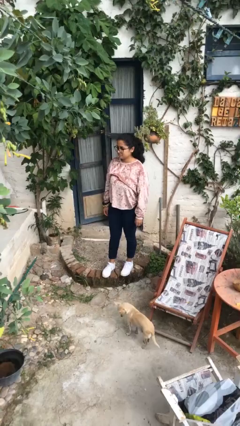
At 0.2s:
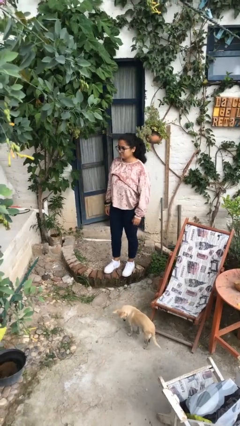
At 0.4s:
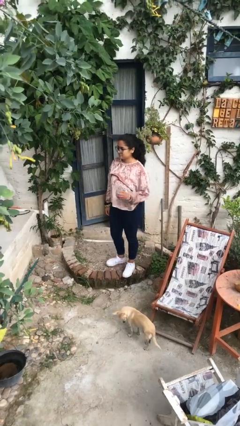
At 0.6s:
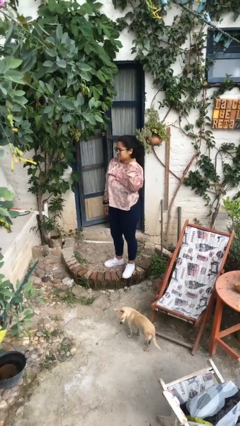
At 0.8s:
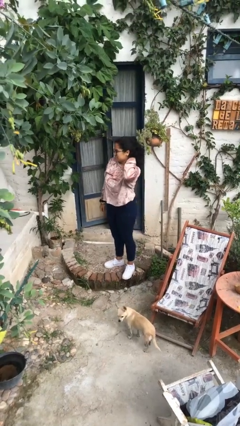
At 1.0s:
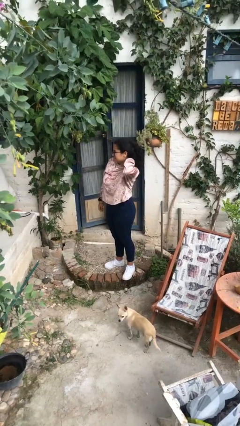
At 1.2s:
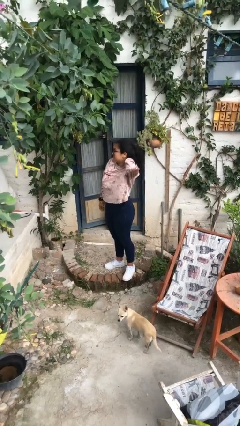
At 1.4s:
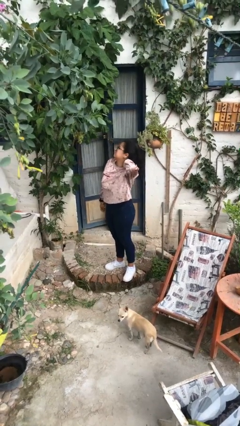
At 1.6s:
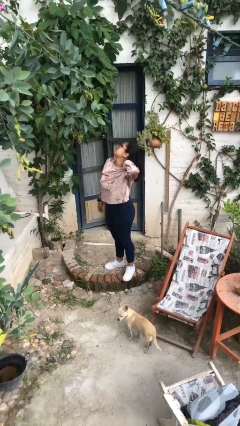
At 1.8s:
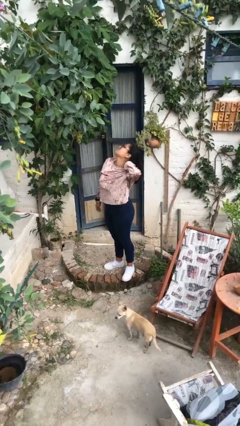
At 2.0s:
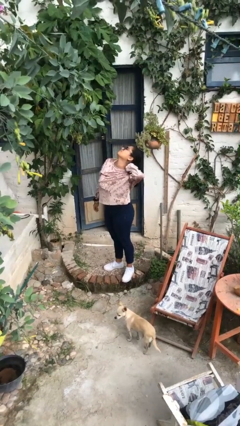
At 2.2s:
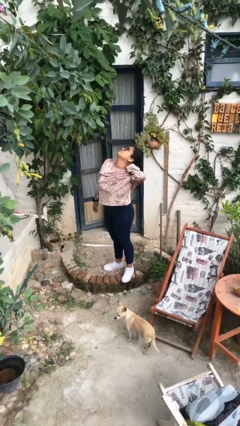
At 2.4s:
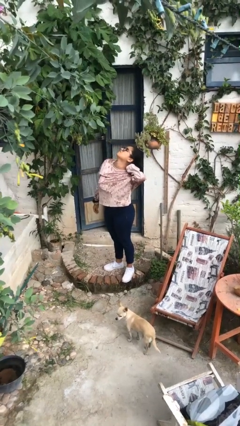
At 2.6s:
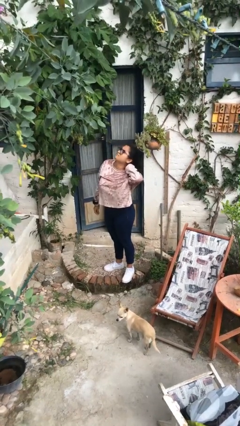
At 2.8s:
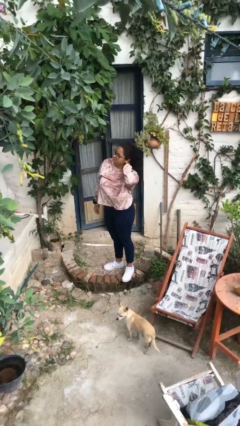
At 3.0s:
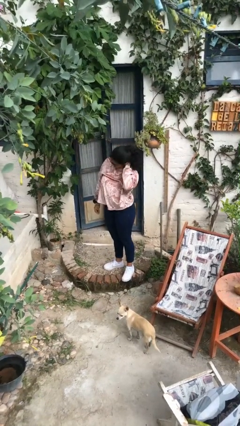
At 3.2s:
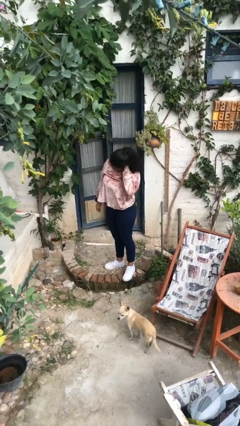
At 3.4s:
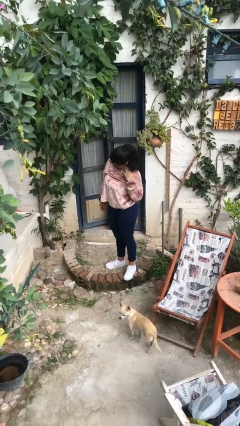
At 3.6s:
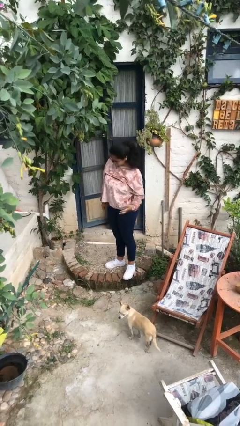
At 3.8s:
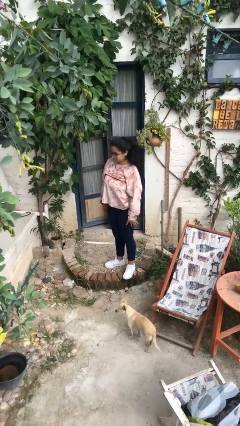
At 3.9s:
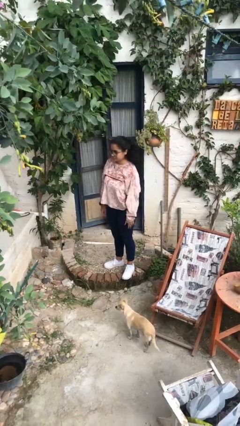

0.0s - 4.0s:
person rubs neck

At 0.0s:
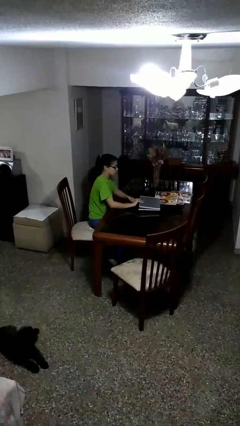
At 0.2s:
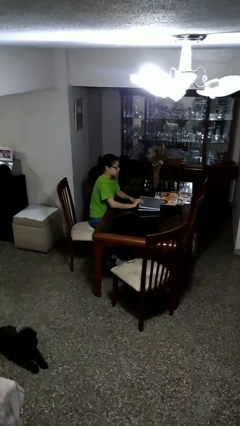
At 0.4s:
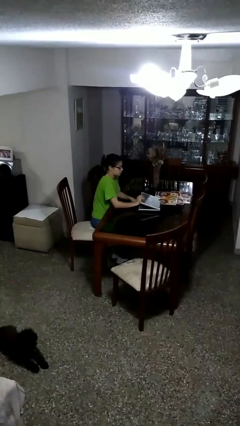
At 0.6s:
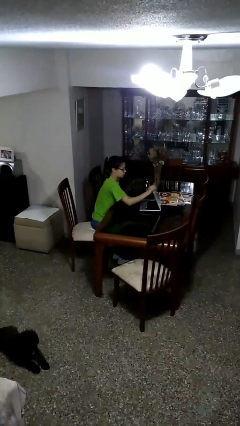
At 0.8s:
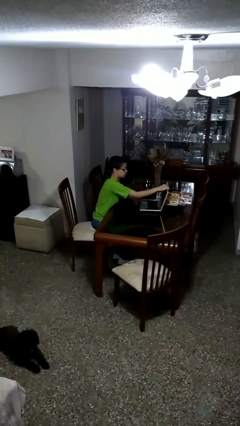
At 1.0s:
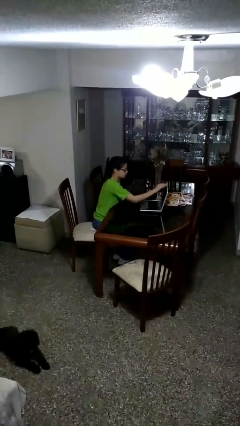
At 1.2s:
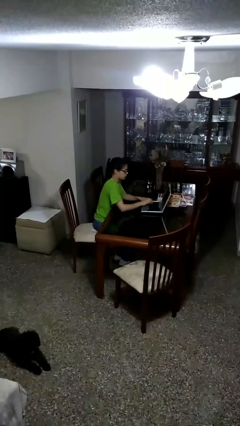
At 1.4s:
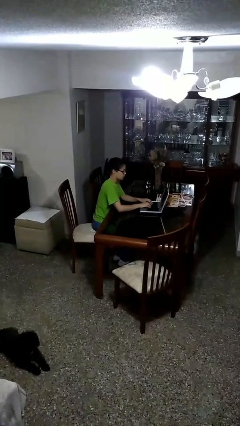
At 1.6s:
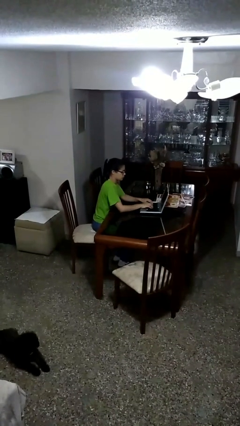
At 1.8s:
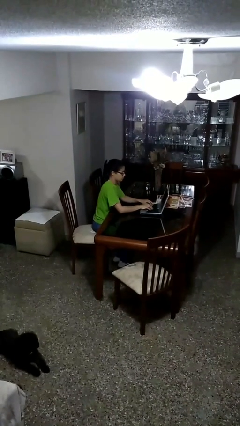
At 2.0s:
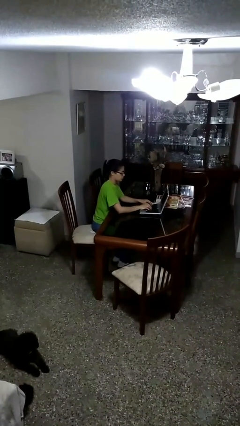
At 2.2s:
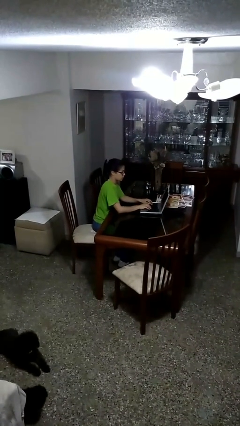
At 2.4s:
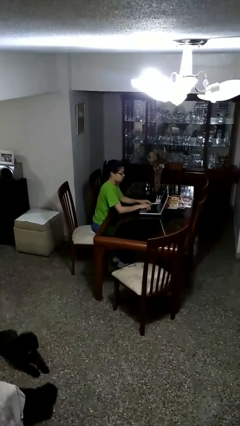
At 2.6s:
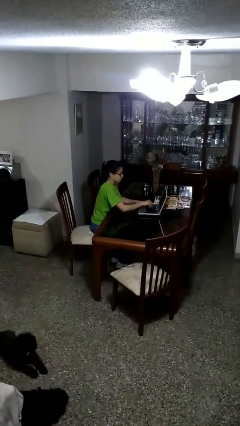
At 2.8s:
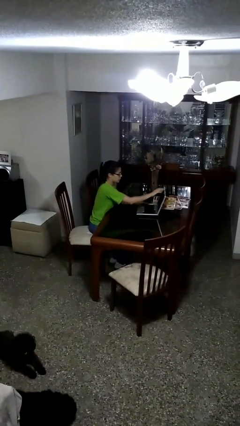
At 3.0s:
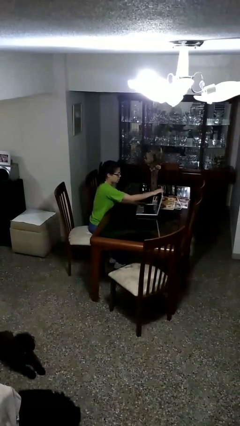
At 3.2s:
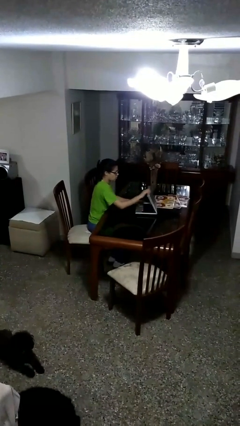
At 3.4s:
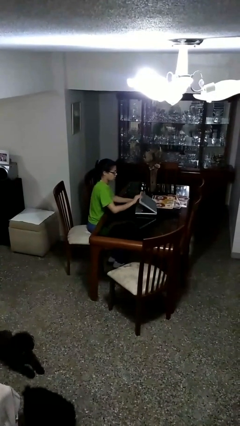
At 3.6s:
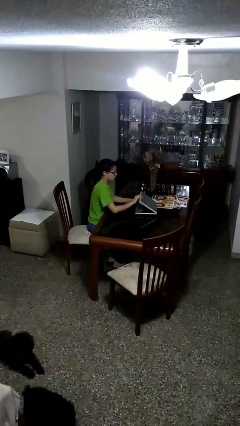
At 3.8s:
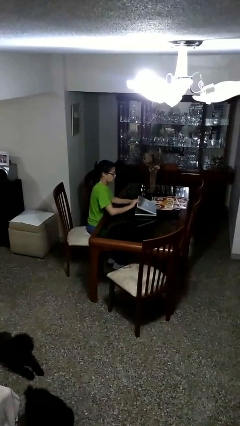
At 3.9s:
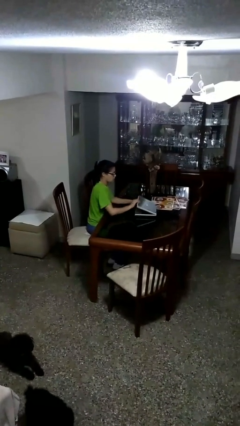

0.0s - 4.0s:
person interacts with laptop

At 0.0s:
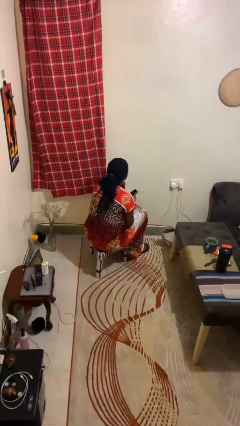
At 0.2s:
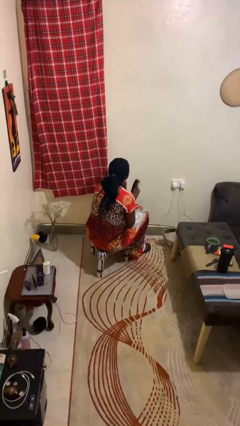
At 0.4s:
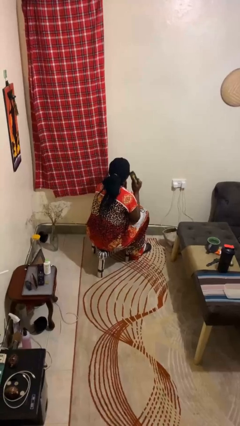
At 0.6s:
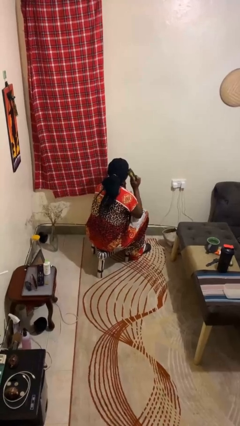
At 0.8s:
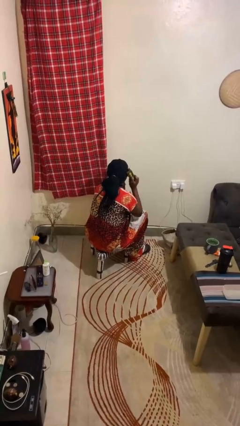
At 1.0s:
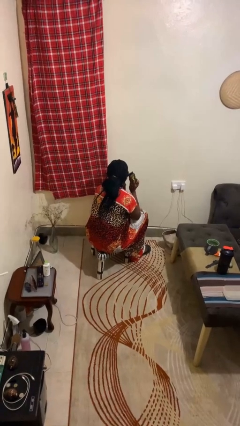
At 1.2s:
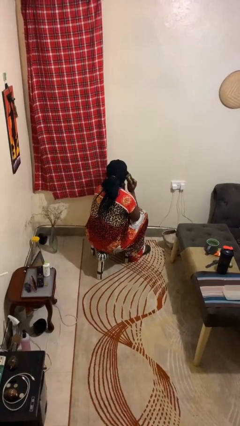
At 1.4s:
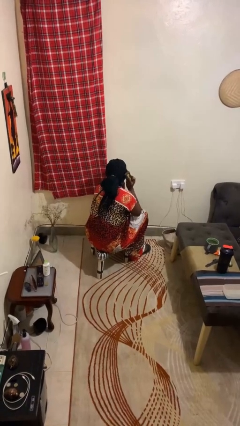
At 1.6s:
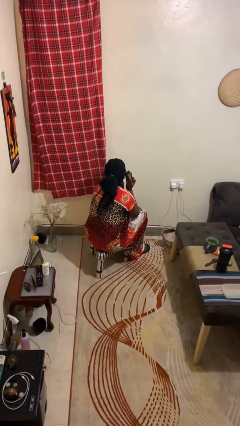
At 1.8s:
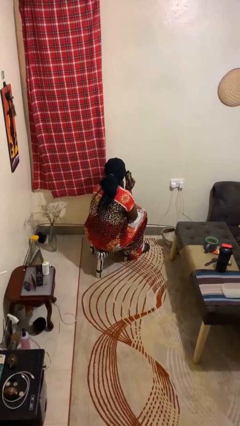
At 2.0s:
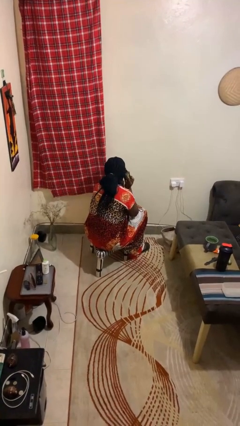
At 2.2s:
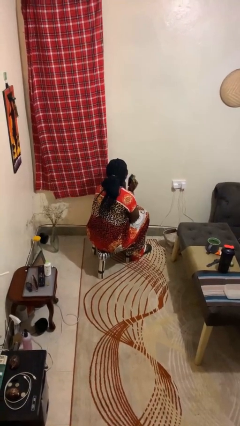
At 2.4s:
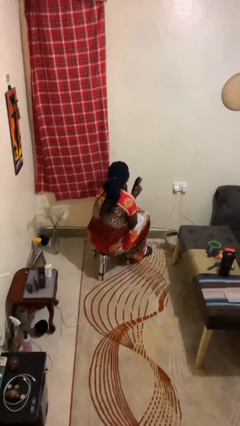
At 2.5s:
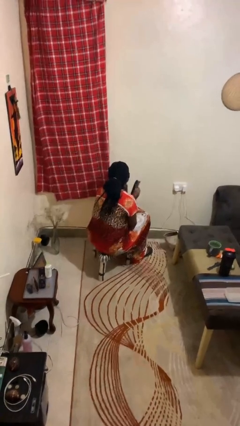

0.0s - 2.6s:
person brushes hair

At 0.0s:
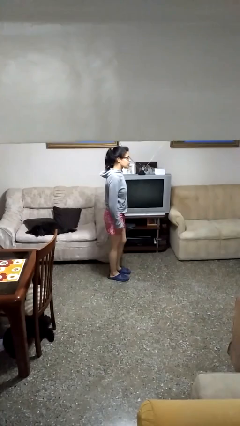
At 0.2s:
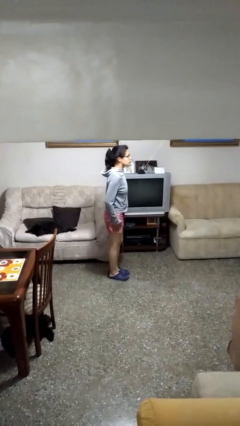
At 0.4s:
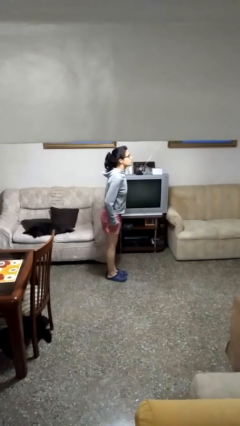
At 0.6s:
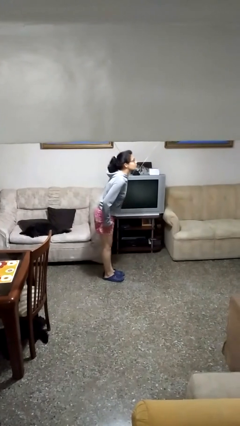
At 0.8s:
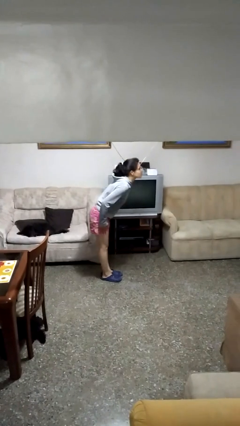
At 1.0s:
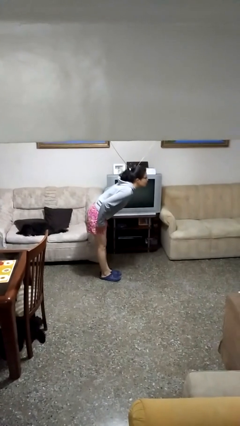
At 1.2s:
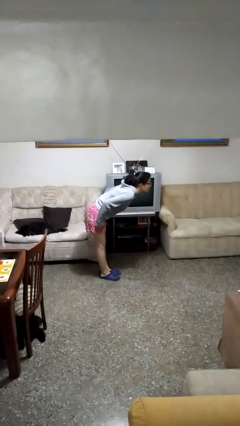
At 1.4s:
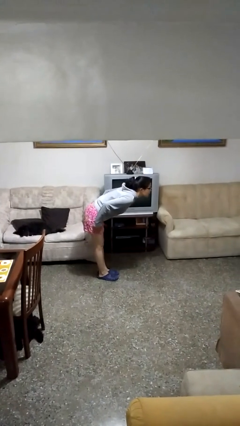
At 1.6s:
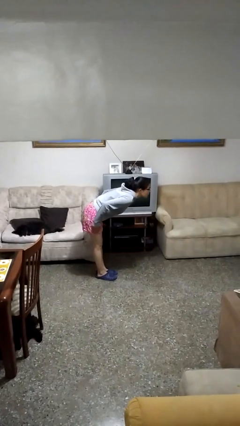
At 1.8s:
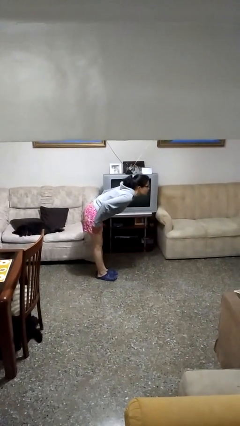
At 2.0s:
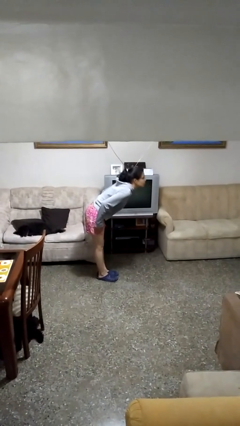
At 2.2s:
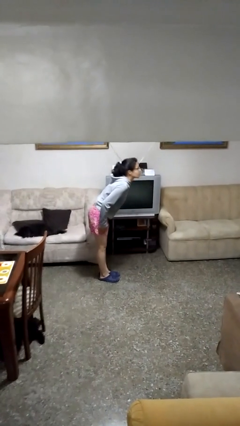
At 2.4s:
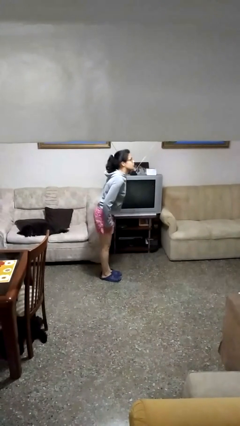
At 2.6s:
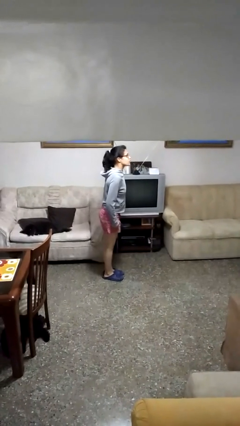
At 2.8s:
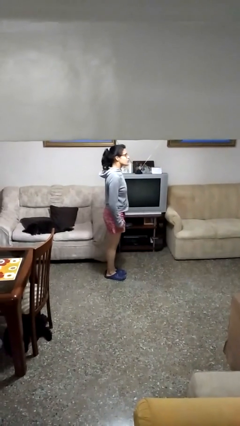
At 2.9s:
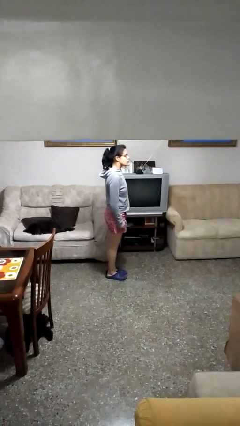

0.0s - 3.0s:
person bows

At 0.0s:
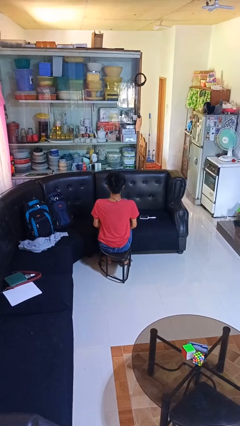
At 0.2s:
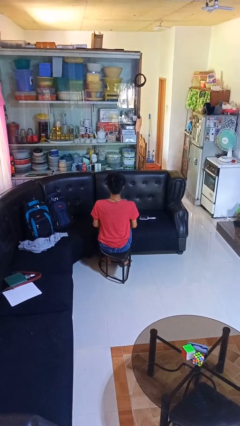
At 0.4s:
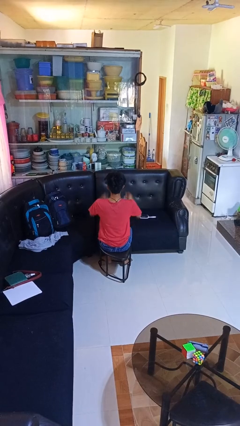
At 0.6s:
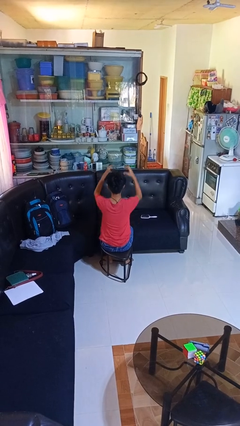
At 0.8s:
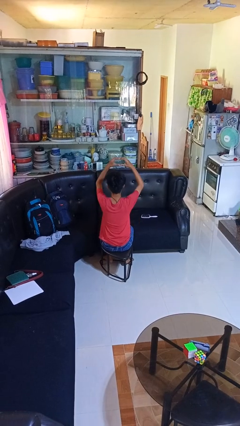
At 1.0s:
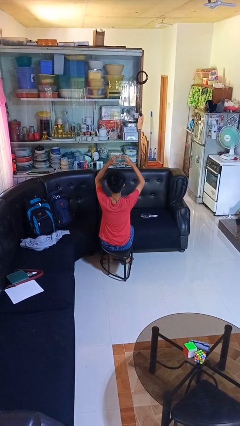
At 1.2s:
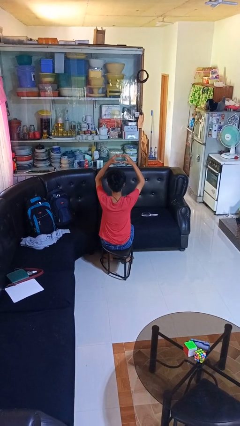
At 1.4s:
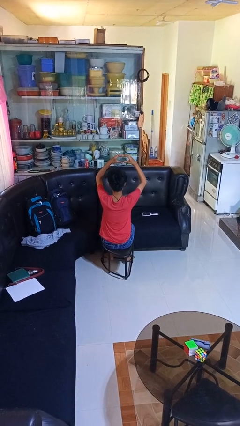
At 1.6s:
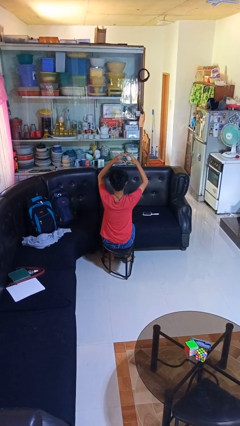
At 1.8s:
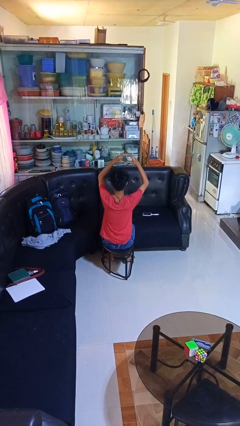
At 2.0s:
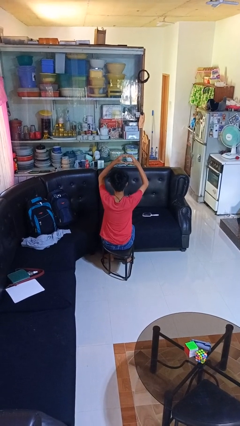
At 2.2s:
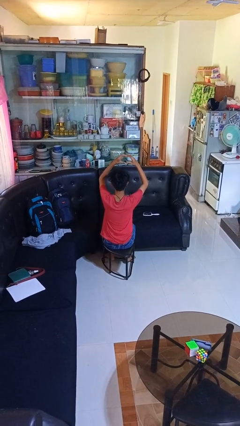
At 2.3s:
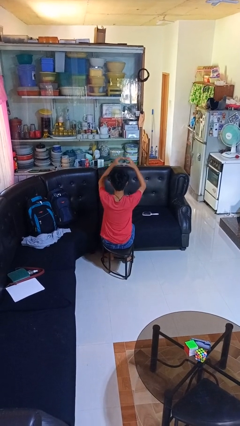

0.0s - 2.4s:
person gestures heart

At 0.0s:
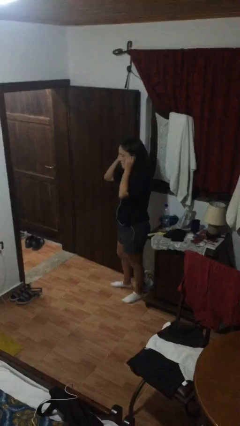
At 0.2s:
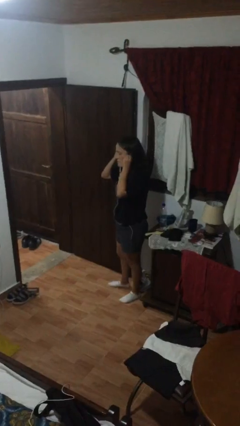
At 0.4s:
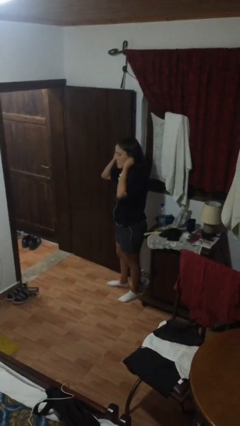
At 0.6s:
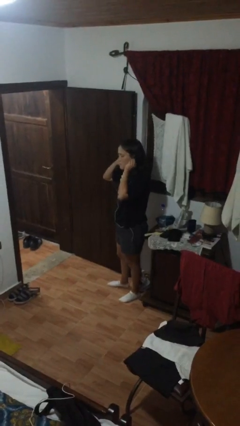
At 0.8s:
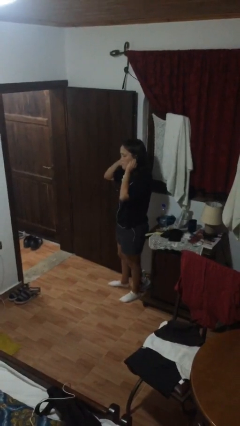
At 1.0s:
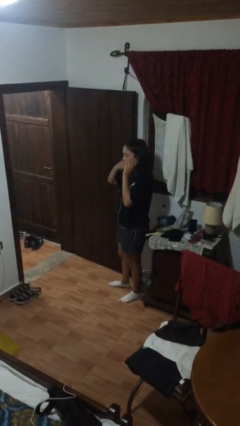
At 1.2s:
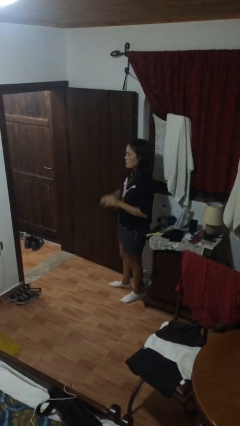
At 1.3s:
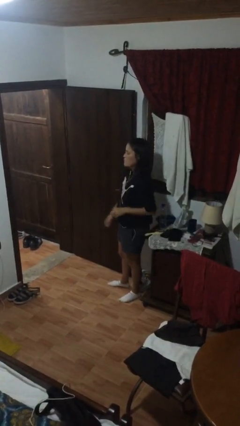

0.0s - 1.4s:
person puts on headphones
